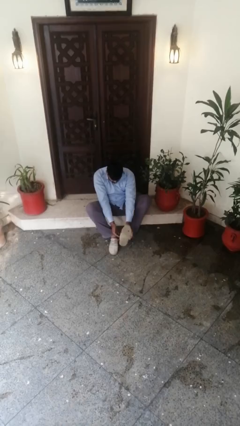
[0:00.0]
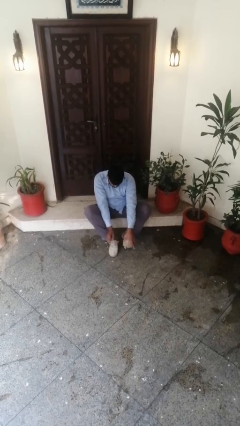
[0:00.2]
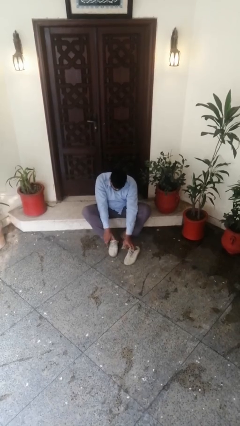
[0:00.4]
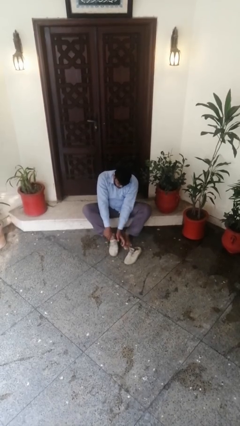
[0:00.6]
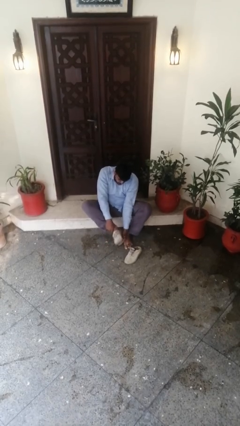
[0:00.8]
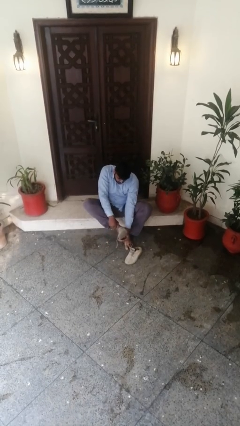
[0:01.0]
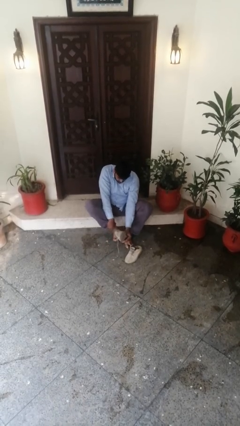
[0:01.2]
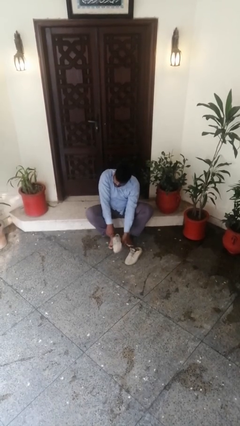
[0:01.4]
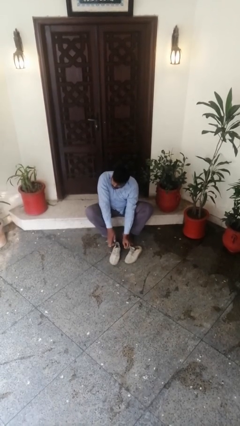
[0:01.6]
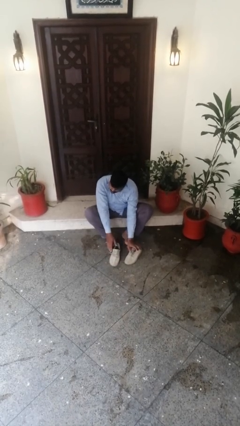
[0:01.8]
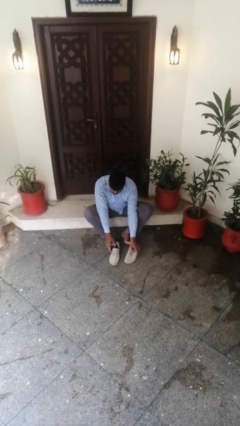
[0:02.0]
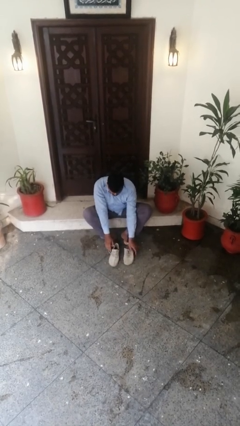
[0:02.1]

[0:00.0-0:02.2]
person takes off shoes

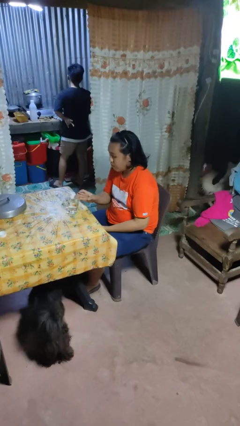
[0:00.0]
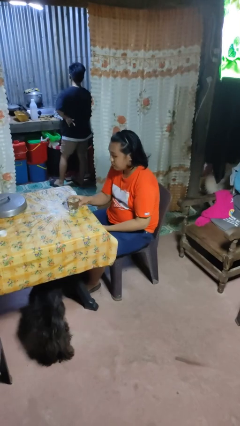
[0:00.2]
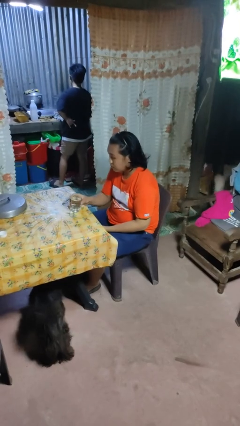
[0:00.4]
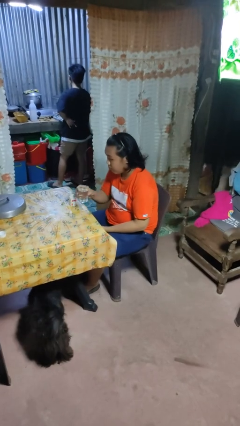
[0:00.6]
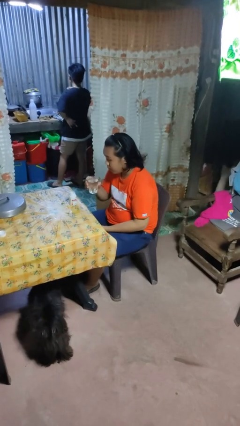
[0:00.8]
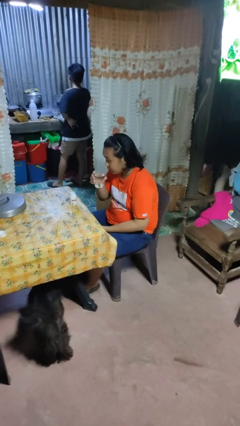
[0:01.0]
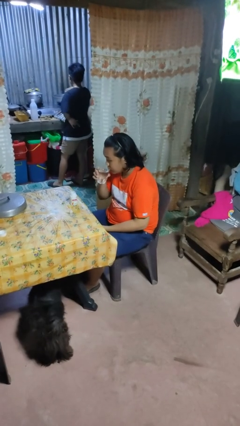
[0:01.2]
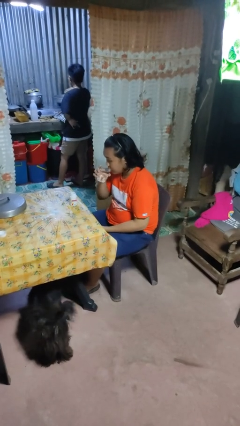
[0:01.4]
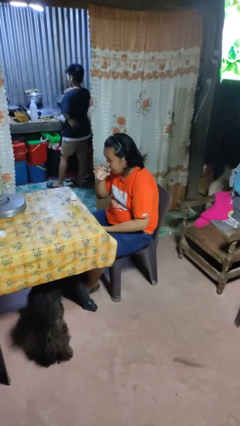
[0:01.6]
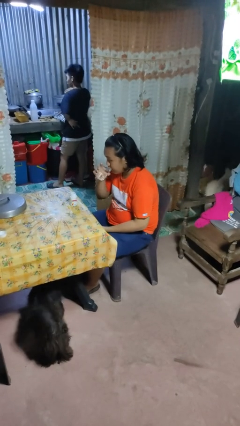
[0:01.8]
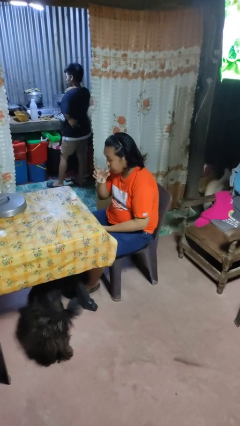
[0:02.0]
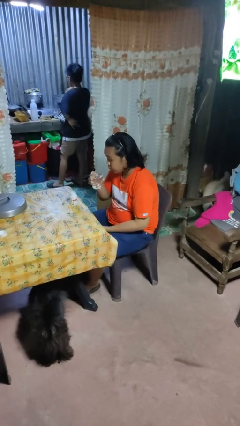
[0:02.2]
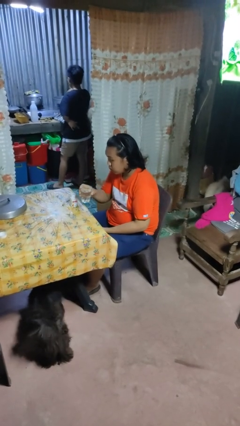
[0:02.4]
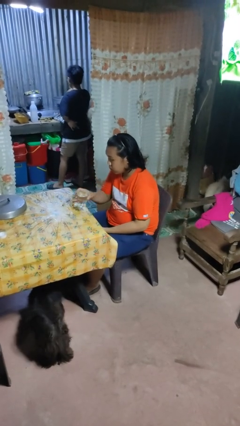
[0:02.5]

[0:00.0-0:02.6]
person drinks from cup

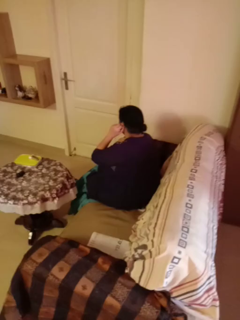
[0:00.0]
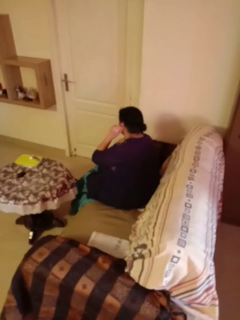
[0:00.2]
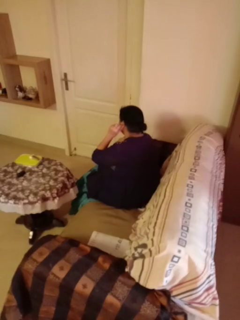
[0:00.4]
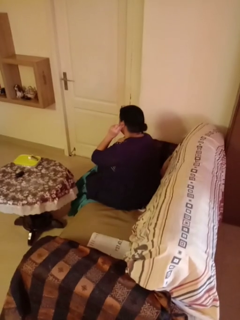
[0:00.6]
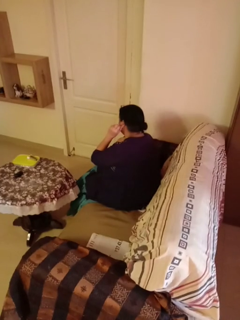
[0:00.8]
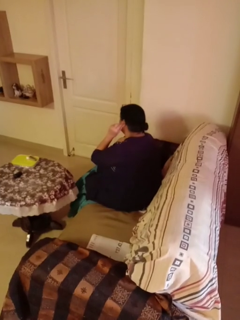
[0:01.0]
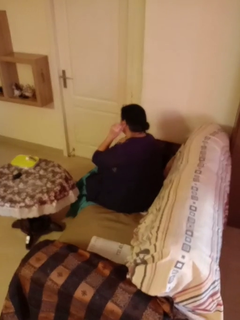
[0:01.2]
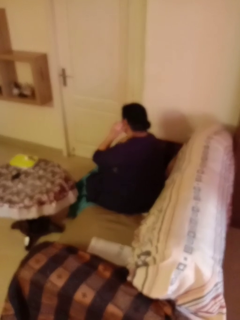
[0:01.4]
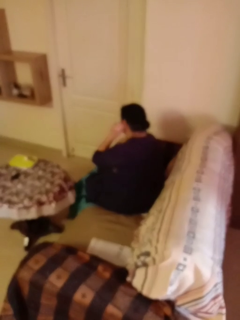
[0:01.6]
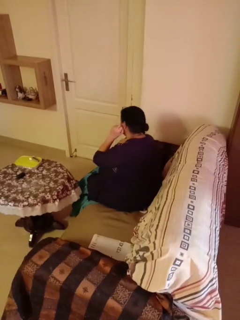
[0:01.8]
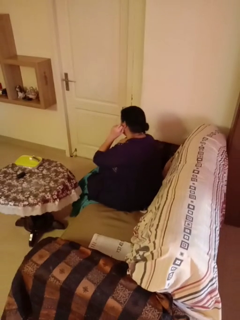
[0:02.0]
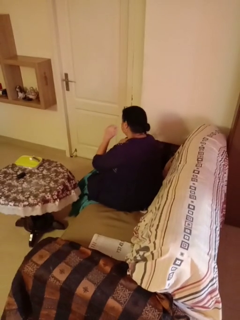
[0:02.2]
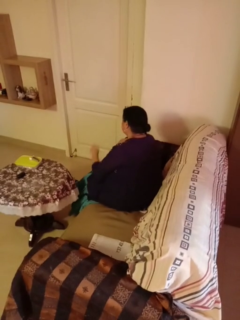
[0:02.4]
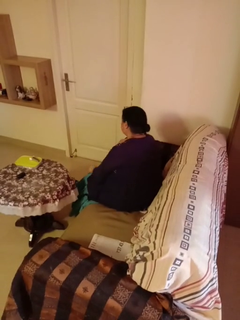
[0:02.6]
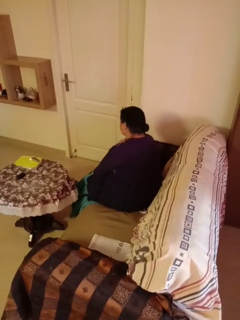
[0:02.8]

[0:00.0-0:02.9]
person touches earlobe

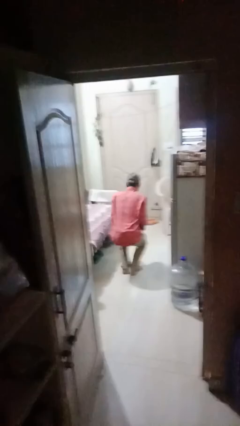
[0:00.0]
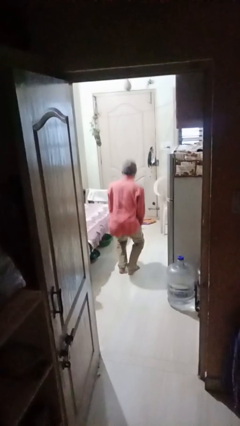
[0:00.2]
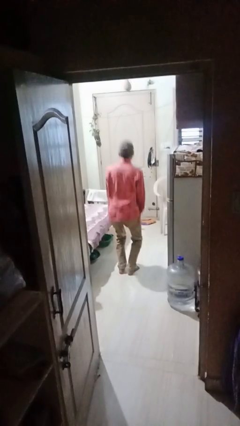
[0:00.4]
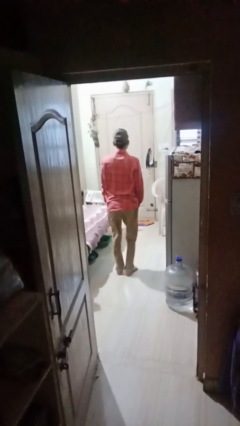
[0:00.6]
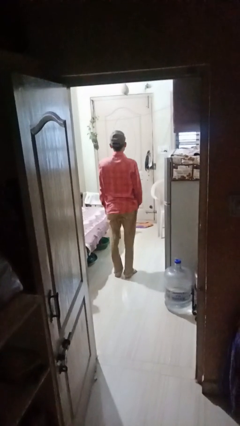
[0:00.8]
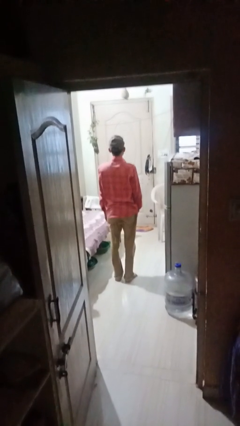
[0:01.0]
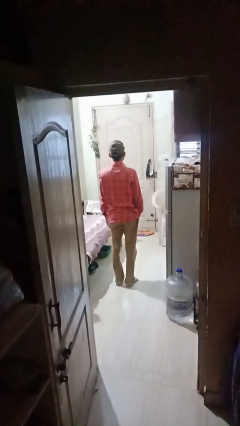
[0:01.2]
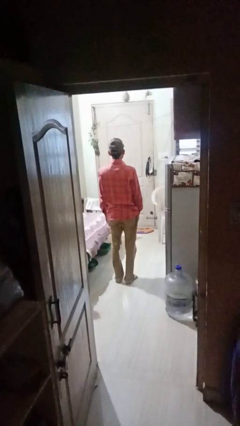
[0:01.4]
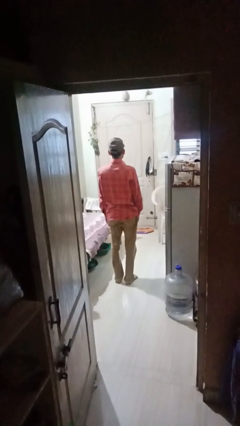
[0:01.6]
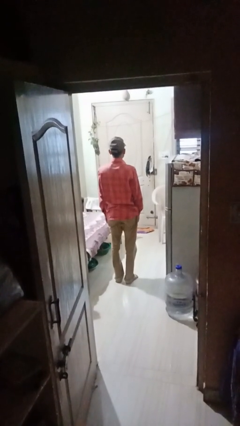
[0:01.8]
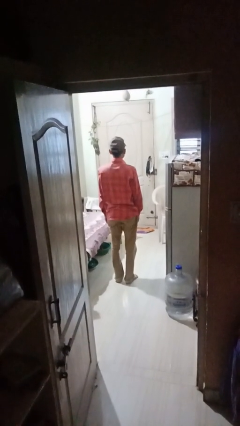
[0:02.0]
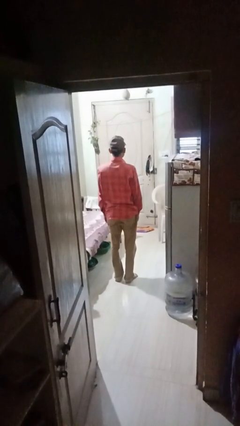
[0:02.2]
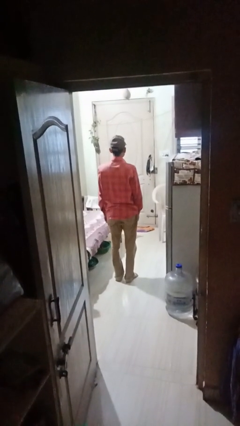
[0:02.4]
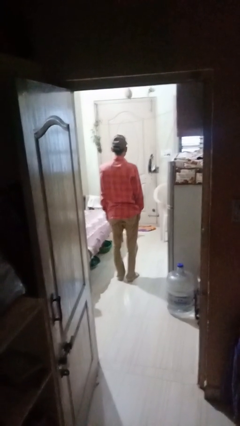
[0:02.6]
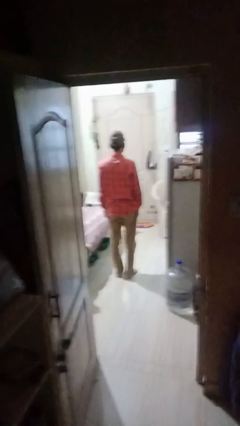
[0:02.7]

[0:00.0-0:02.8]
person stands up

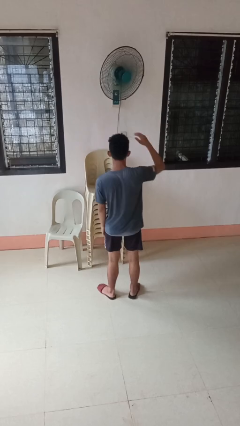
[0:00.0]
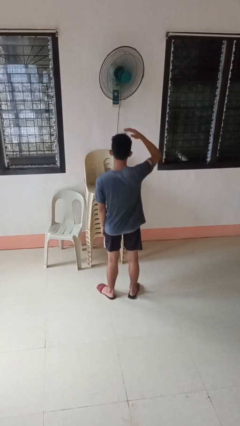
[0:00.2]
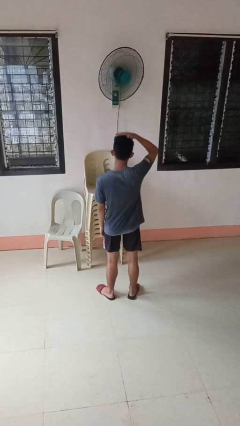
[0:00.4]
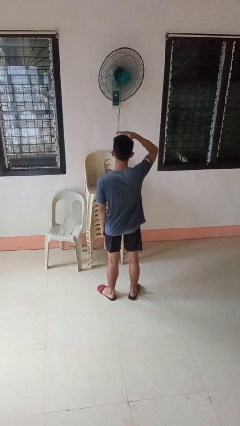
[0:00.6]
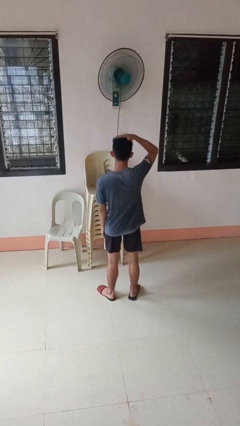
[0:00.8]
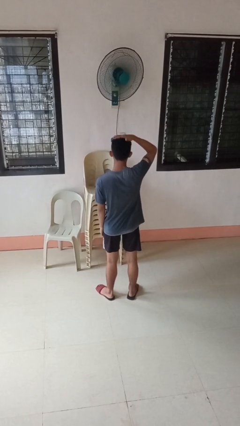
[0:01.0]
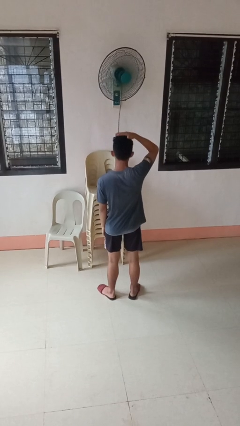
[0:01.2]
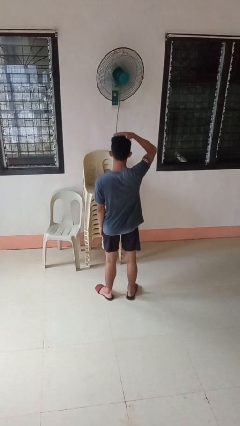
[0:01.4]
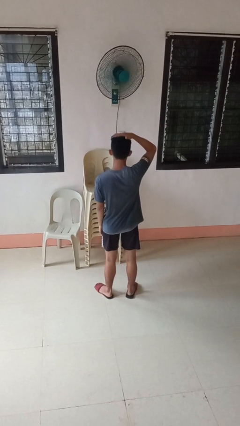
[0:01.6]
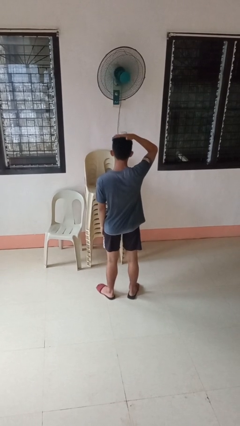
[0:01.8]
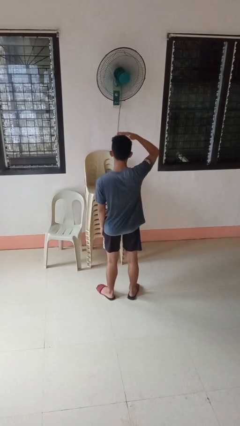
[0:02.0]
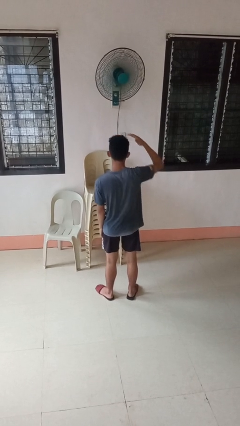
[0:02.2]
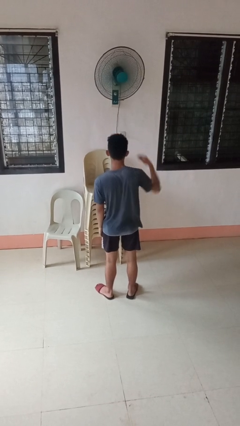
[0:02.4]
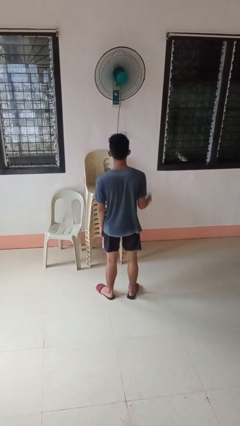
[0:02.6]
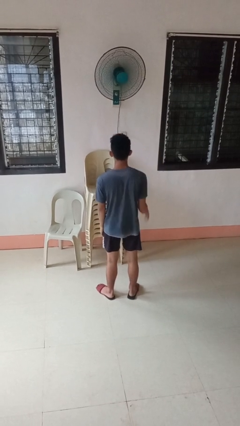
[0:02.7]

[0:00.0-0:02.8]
person pats head

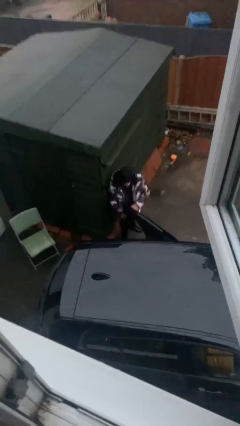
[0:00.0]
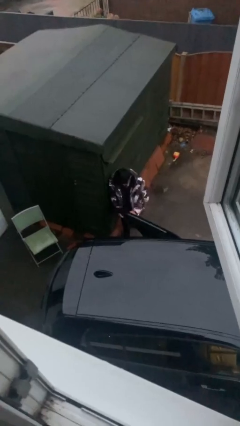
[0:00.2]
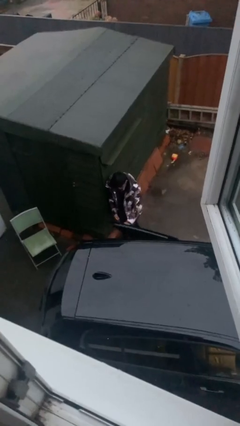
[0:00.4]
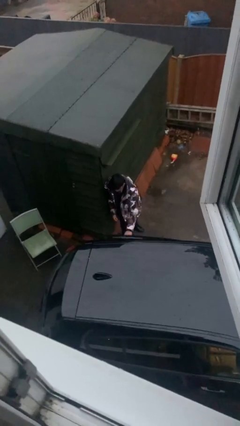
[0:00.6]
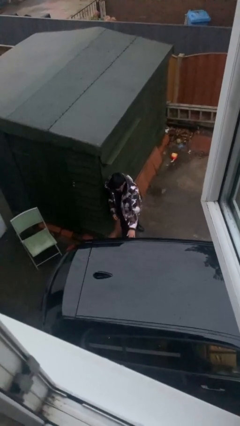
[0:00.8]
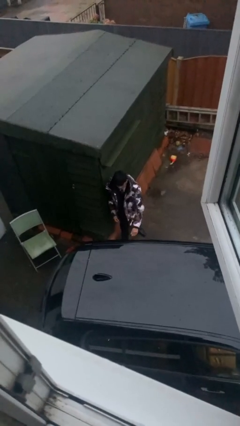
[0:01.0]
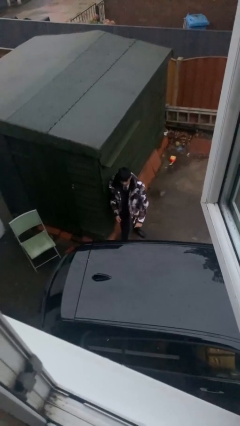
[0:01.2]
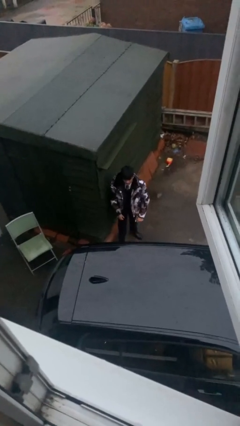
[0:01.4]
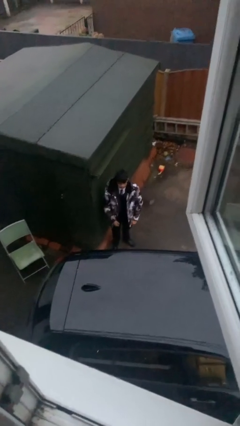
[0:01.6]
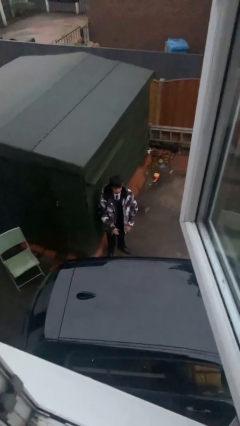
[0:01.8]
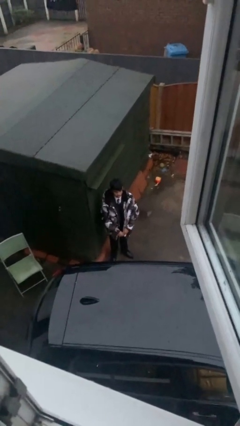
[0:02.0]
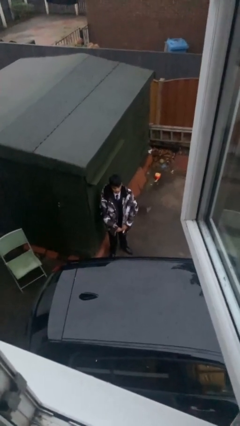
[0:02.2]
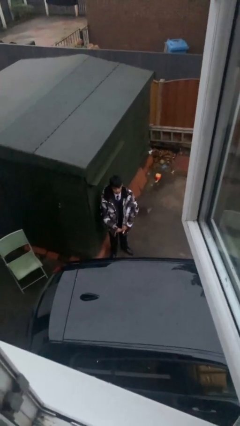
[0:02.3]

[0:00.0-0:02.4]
person closes car door

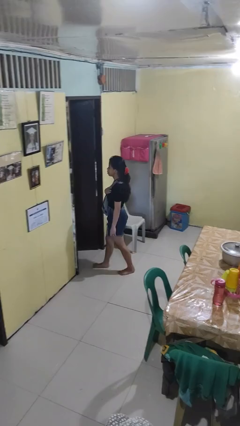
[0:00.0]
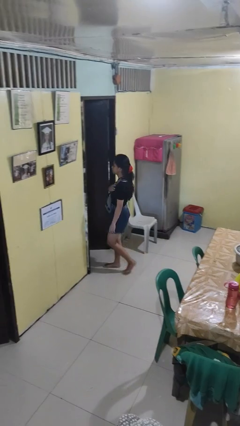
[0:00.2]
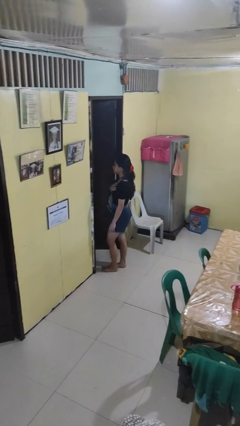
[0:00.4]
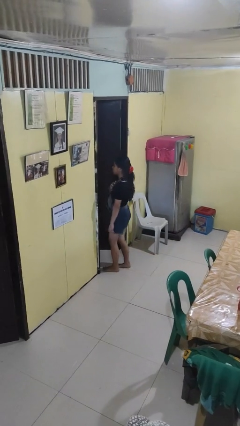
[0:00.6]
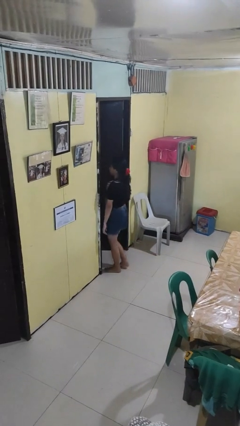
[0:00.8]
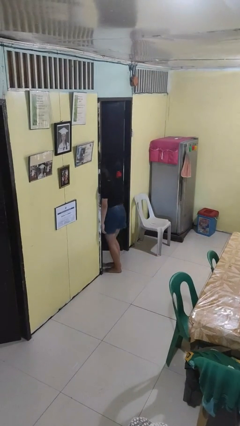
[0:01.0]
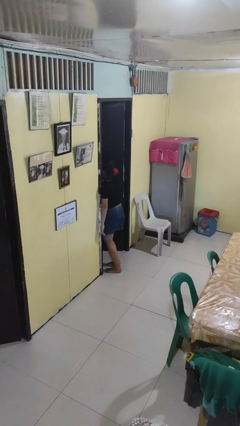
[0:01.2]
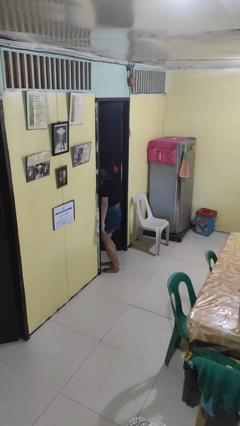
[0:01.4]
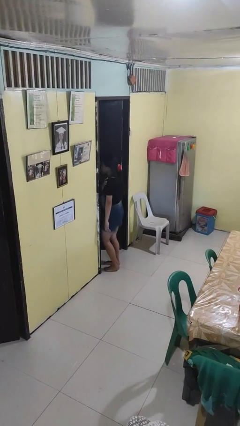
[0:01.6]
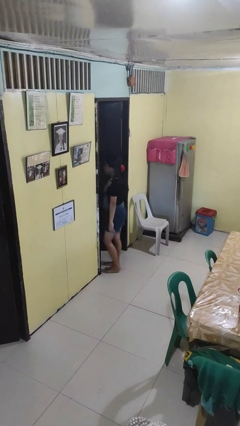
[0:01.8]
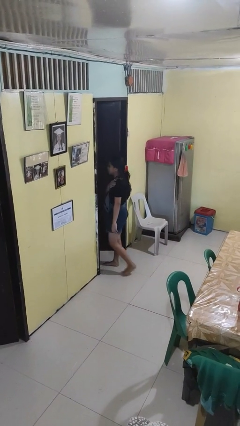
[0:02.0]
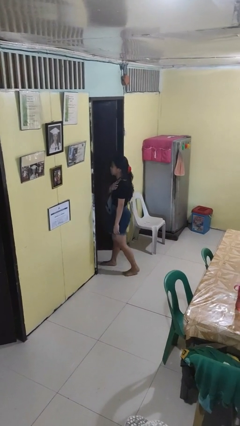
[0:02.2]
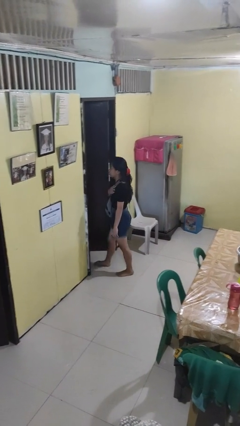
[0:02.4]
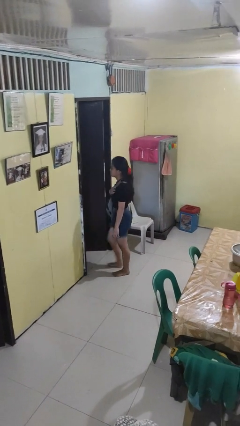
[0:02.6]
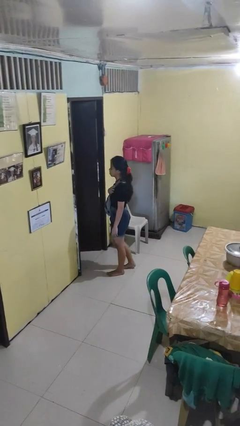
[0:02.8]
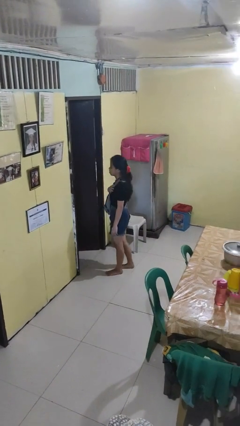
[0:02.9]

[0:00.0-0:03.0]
person bumps into wall
